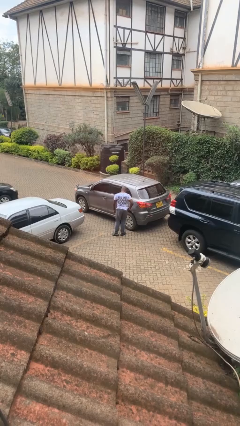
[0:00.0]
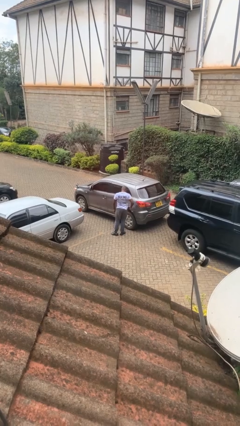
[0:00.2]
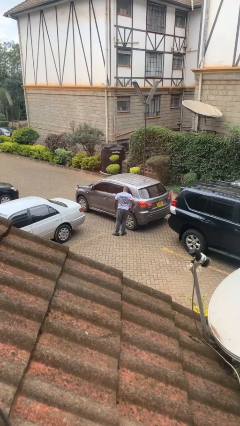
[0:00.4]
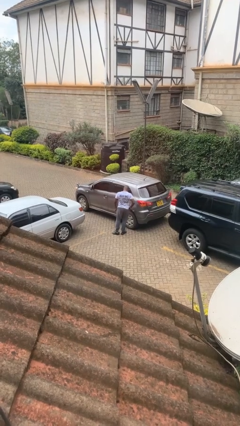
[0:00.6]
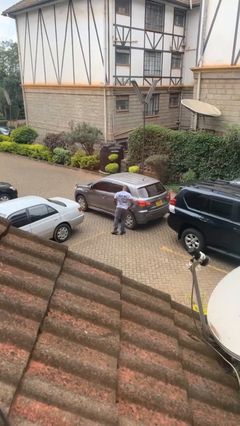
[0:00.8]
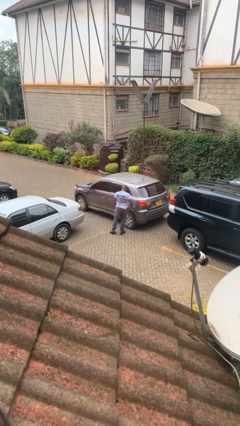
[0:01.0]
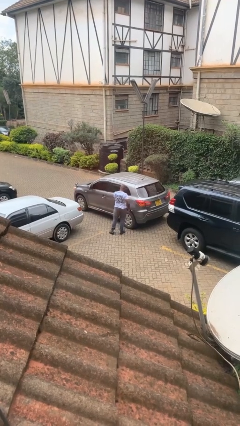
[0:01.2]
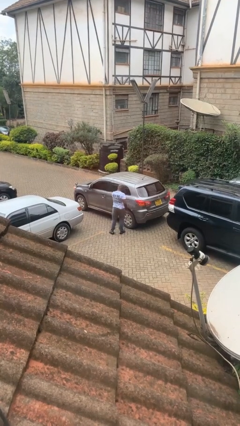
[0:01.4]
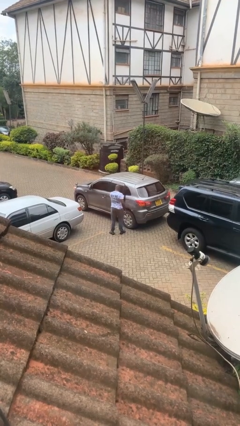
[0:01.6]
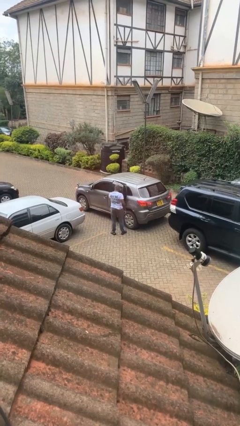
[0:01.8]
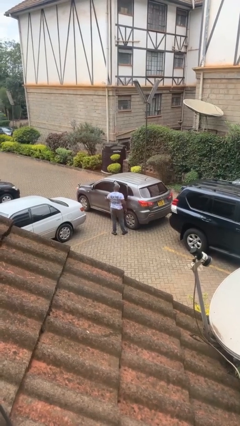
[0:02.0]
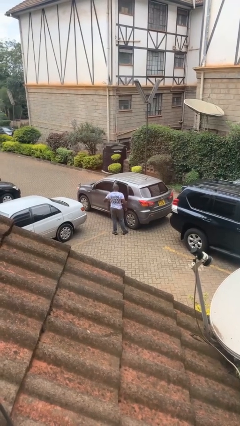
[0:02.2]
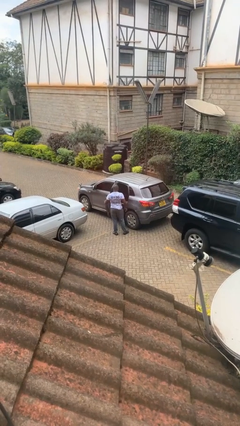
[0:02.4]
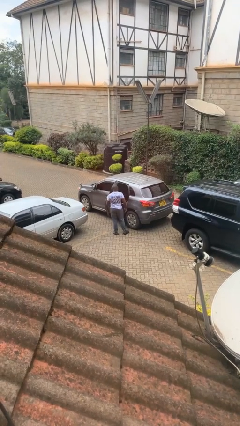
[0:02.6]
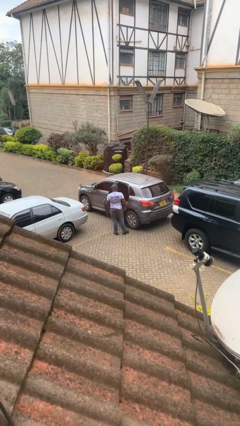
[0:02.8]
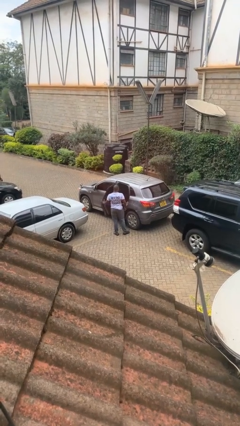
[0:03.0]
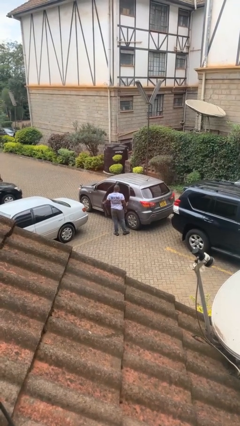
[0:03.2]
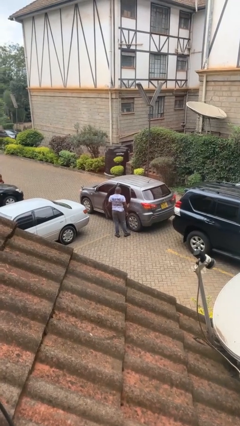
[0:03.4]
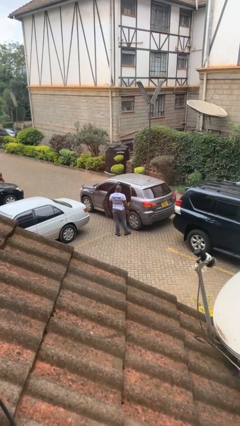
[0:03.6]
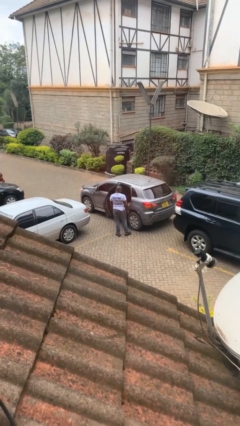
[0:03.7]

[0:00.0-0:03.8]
person opens car door

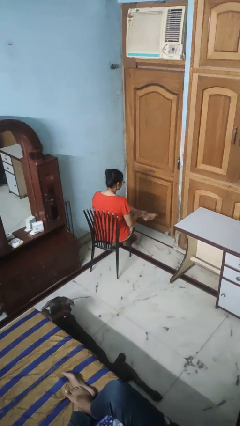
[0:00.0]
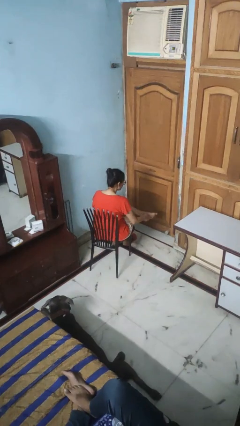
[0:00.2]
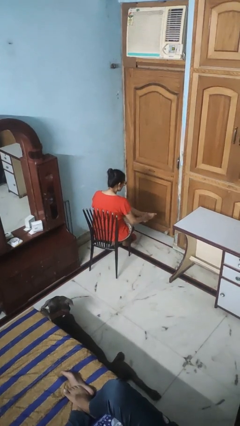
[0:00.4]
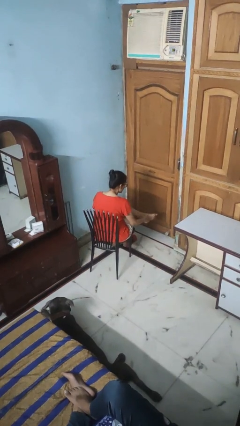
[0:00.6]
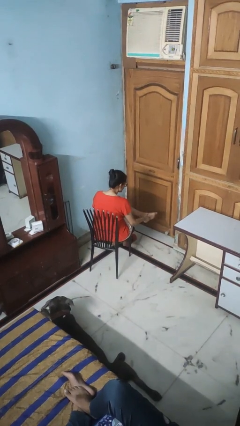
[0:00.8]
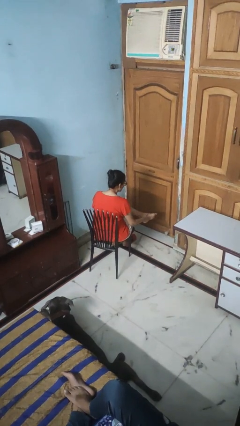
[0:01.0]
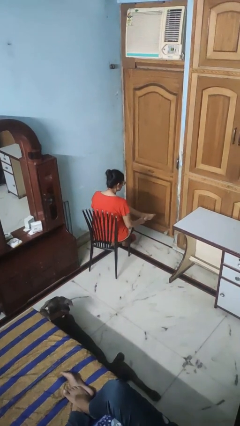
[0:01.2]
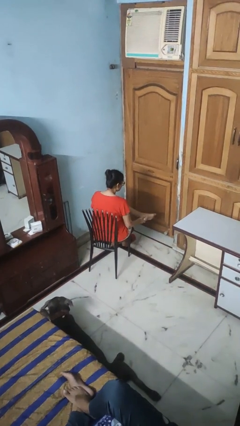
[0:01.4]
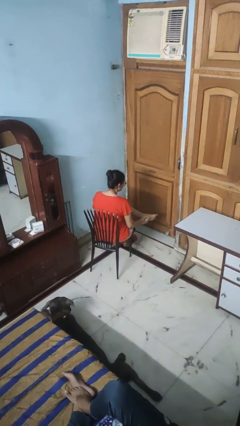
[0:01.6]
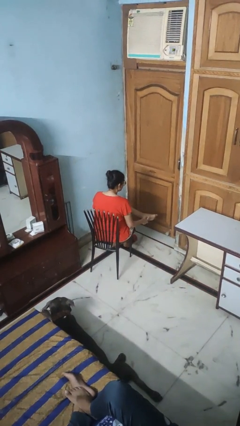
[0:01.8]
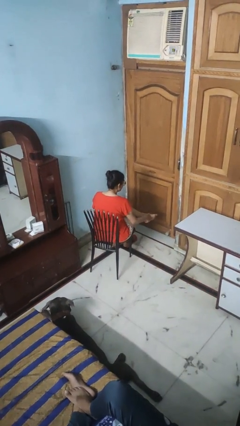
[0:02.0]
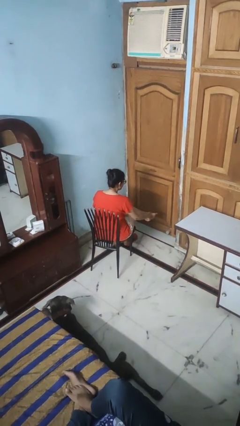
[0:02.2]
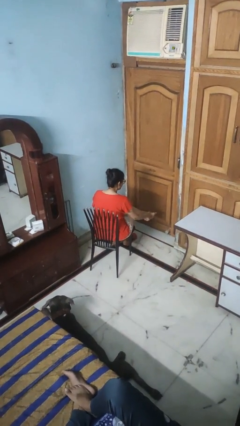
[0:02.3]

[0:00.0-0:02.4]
person rubs foot

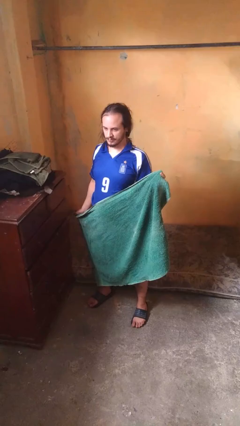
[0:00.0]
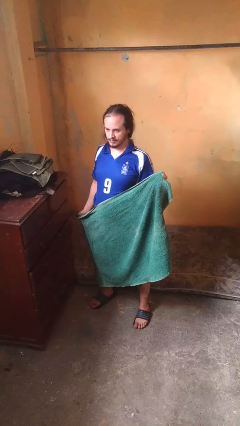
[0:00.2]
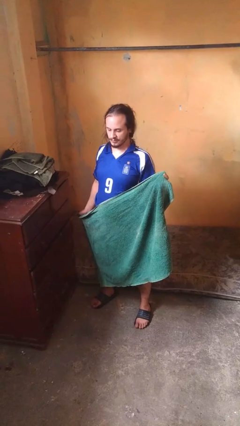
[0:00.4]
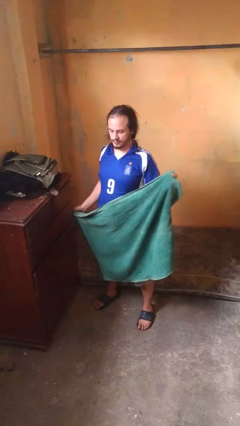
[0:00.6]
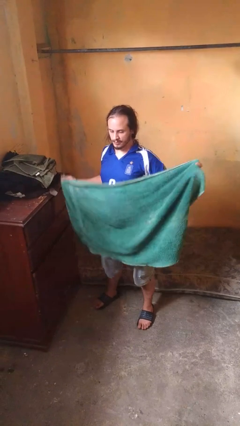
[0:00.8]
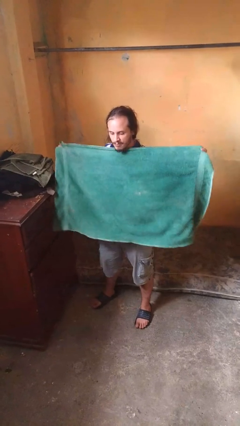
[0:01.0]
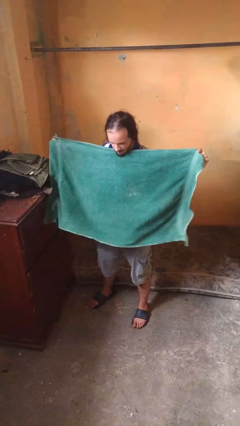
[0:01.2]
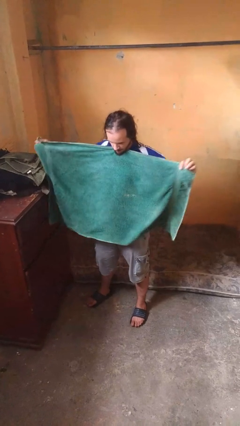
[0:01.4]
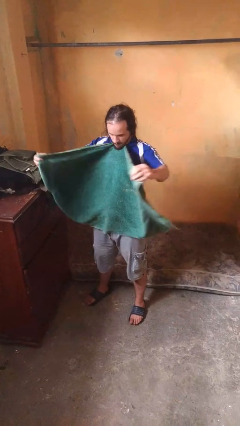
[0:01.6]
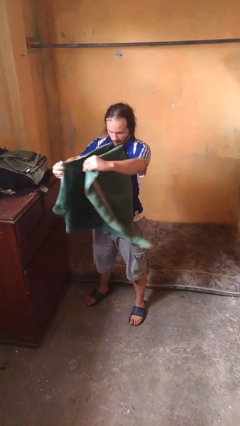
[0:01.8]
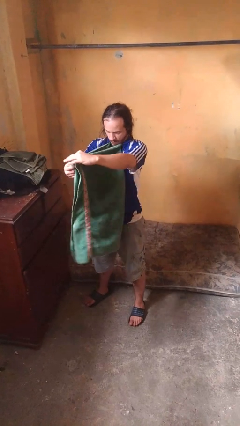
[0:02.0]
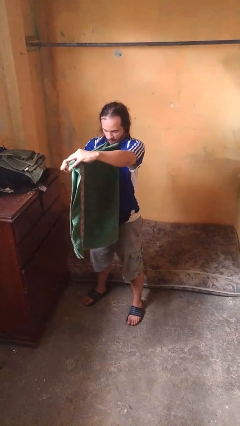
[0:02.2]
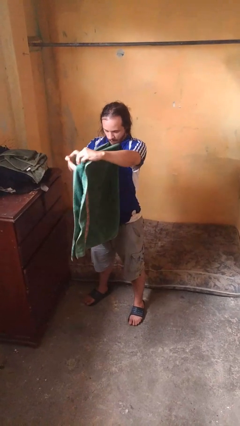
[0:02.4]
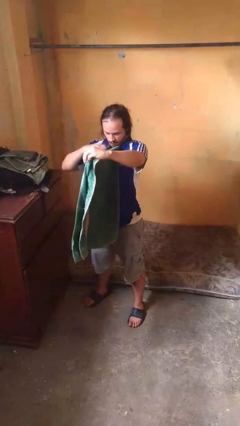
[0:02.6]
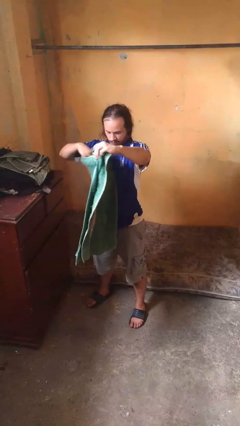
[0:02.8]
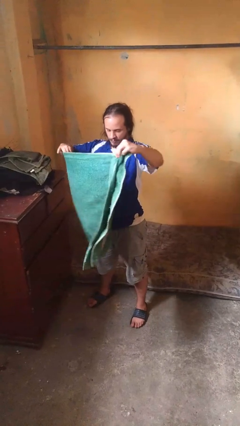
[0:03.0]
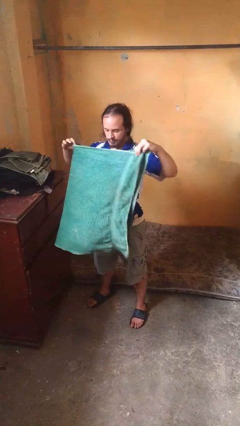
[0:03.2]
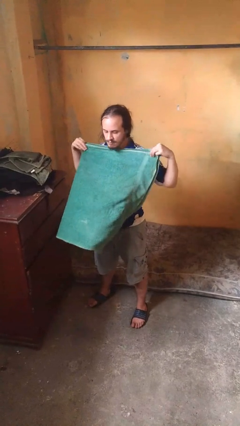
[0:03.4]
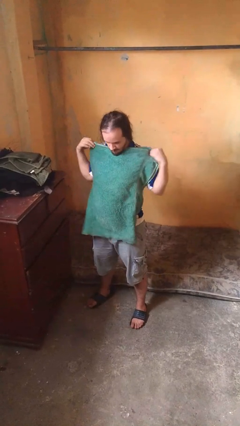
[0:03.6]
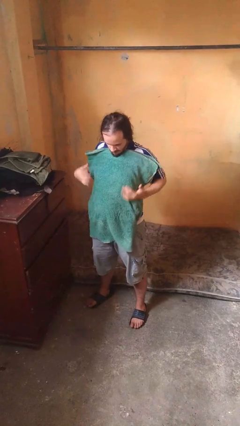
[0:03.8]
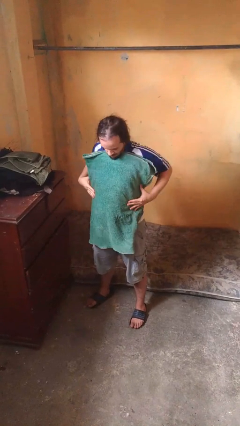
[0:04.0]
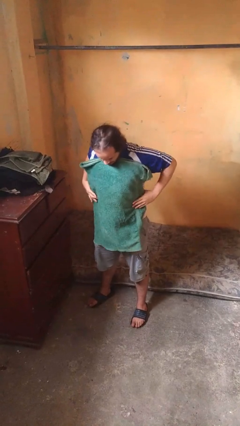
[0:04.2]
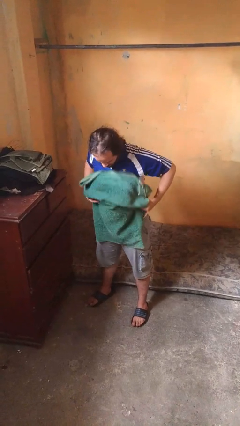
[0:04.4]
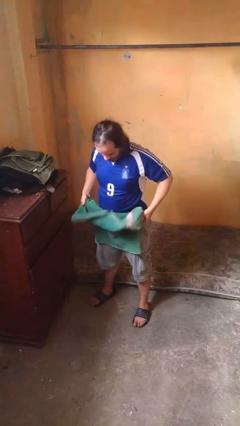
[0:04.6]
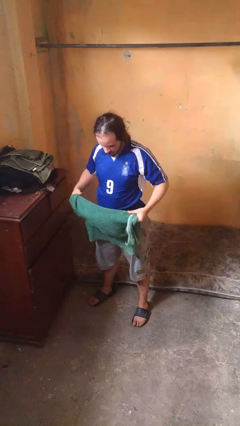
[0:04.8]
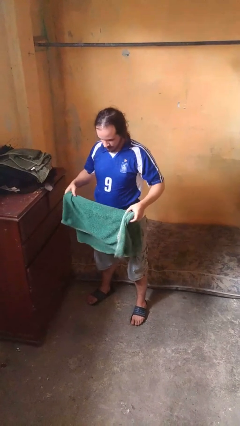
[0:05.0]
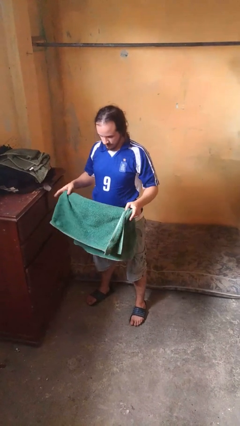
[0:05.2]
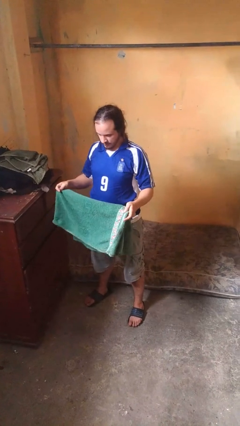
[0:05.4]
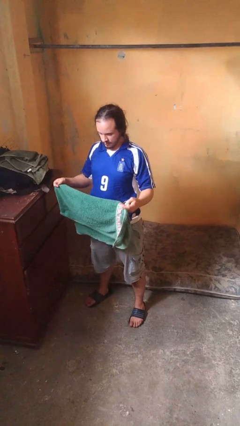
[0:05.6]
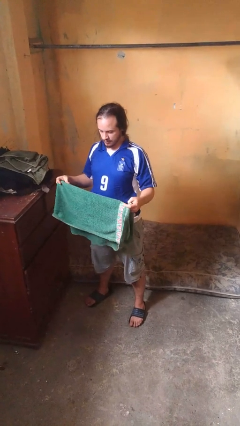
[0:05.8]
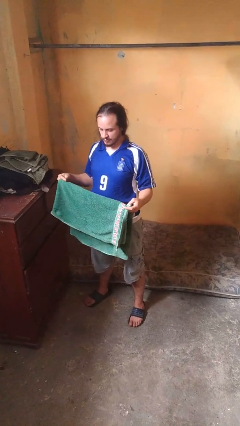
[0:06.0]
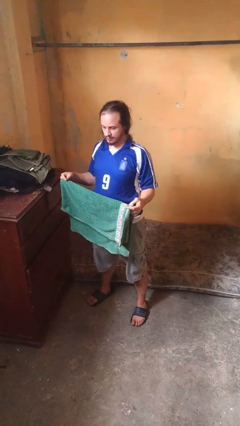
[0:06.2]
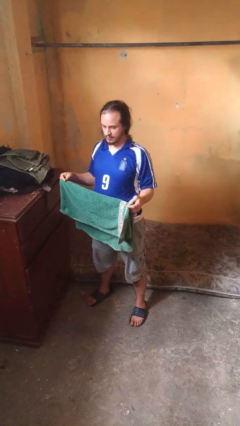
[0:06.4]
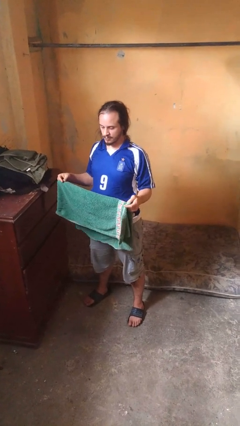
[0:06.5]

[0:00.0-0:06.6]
person folds blanket

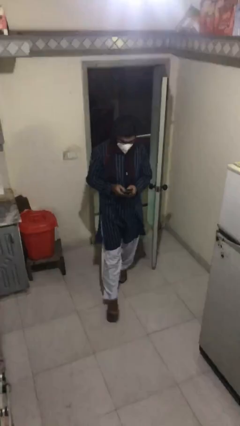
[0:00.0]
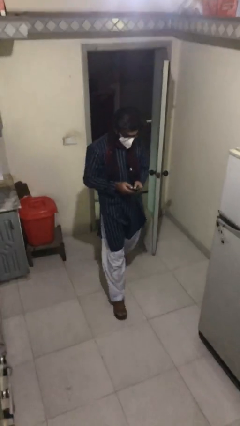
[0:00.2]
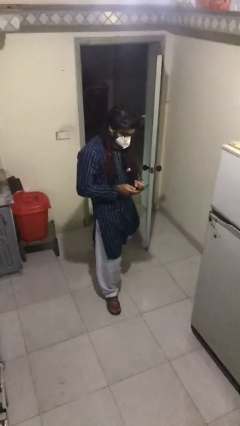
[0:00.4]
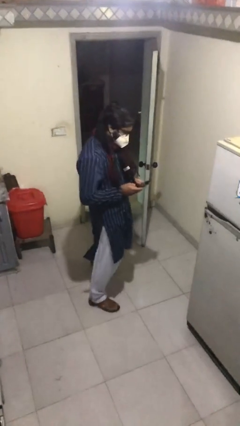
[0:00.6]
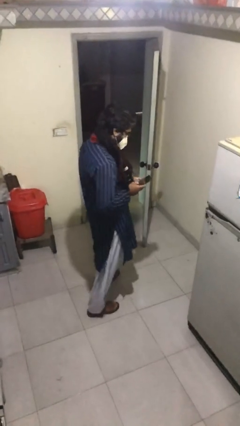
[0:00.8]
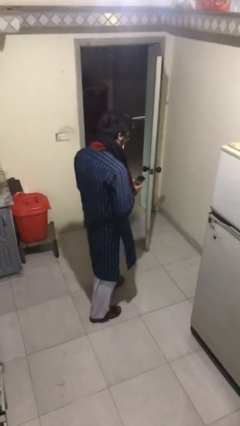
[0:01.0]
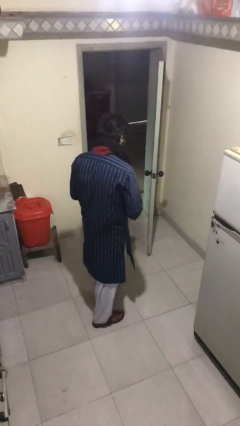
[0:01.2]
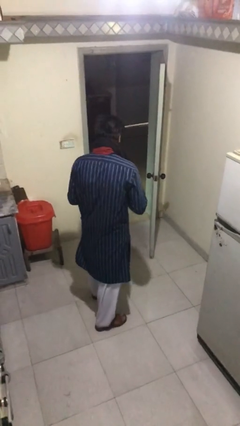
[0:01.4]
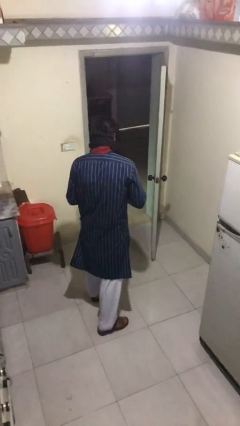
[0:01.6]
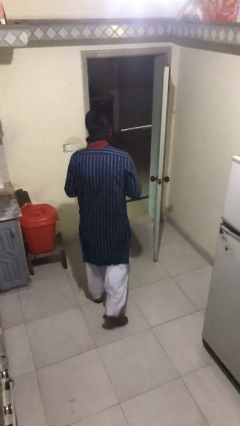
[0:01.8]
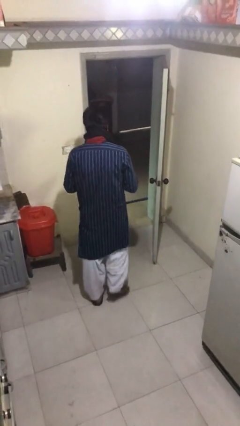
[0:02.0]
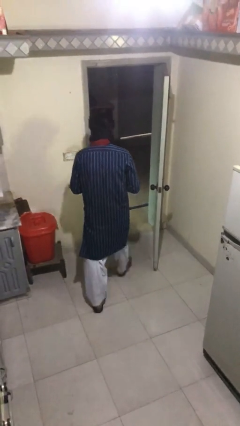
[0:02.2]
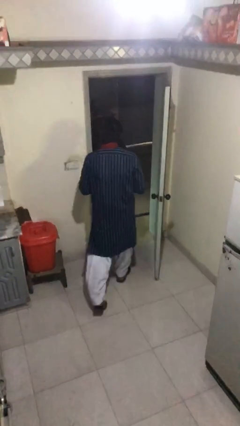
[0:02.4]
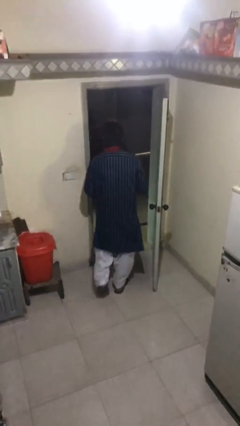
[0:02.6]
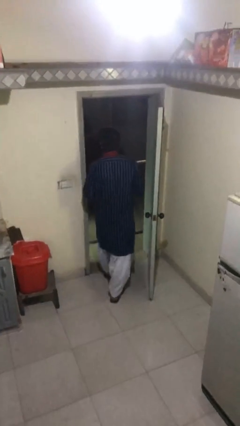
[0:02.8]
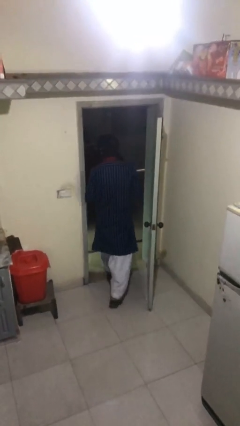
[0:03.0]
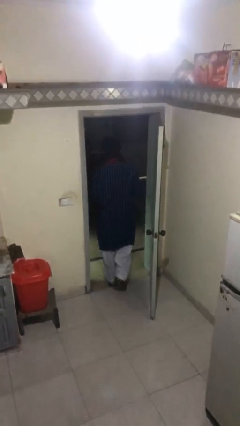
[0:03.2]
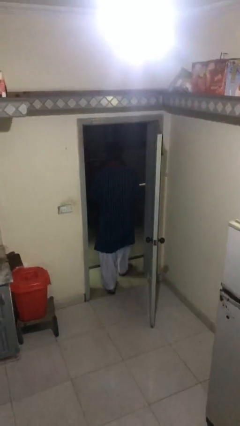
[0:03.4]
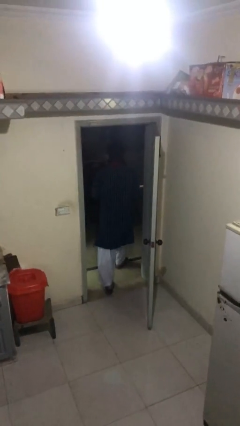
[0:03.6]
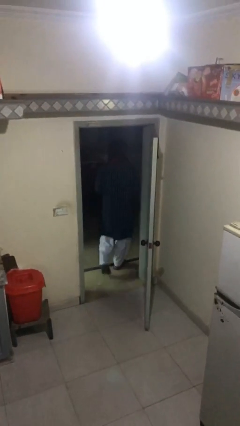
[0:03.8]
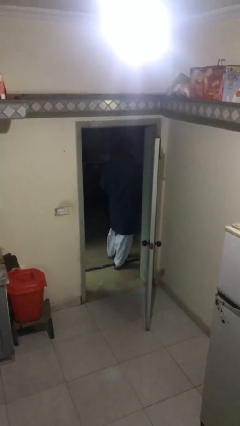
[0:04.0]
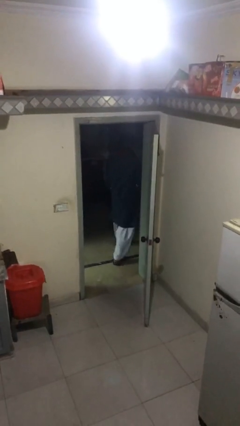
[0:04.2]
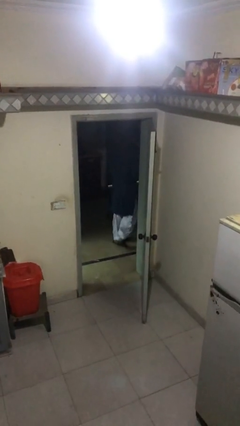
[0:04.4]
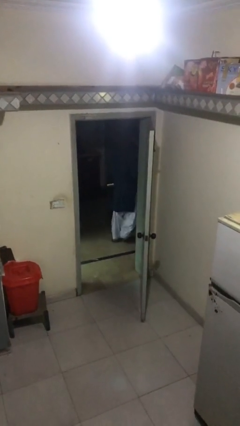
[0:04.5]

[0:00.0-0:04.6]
person exits scene through structure

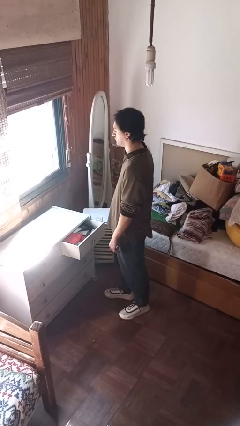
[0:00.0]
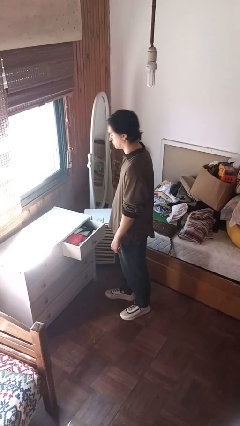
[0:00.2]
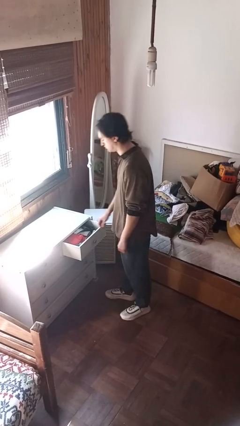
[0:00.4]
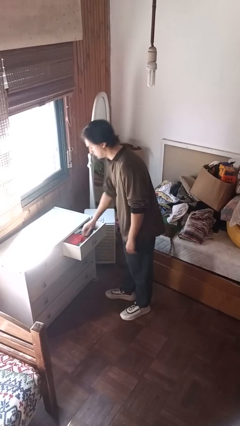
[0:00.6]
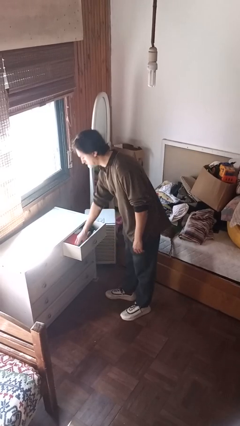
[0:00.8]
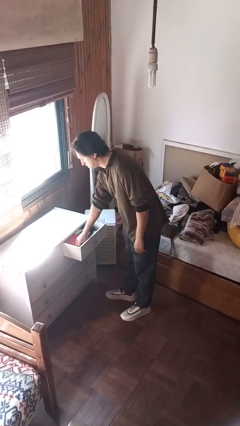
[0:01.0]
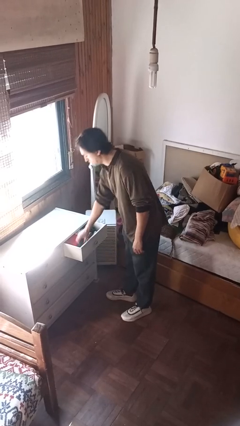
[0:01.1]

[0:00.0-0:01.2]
person takes clothes from dresser
